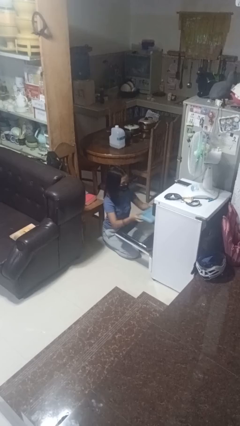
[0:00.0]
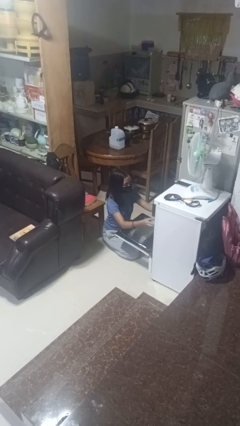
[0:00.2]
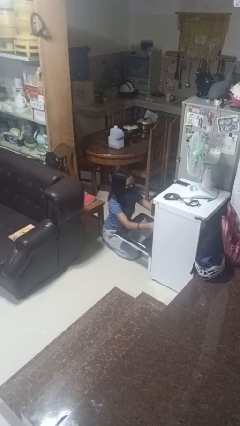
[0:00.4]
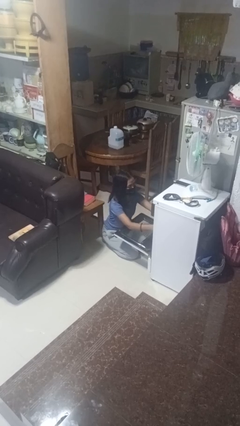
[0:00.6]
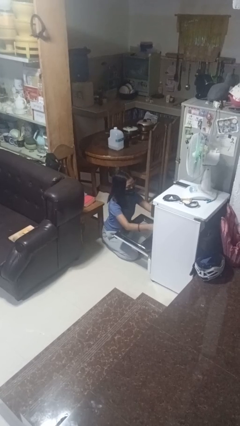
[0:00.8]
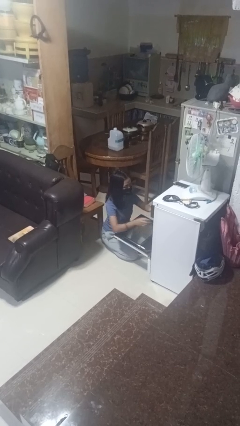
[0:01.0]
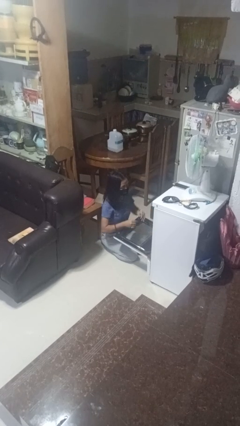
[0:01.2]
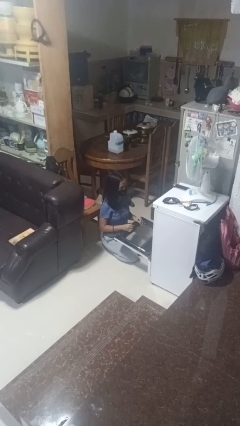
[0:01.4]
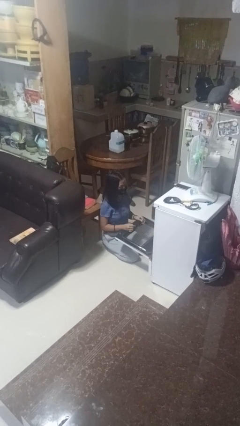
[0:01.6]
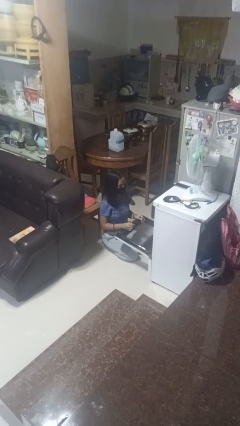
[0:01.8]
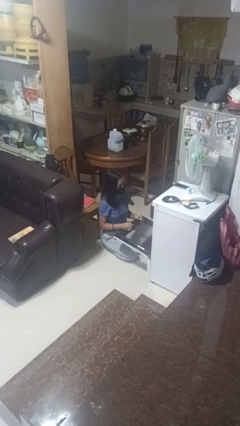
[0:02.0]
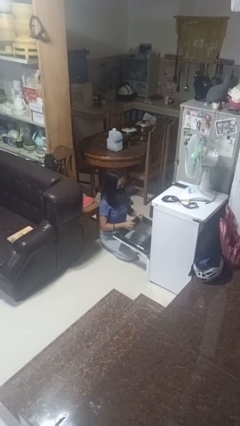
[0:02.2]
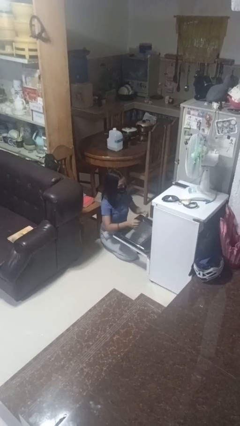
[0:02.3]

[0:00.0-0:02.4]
person puts object into oven

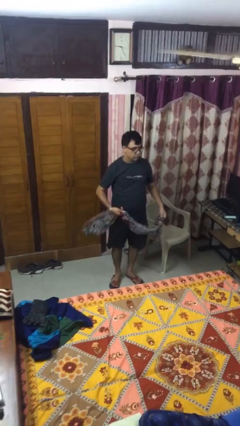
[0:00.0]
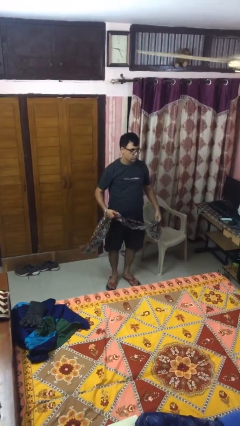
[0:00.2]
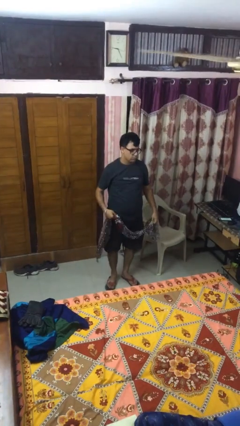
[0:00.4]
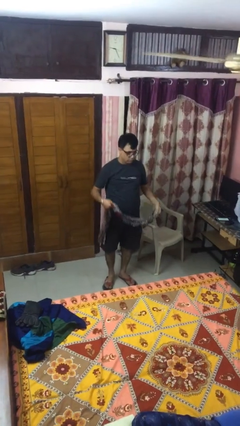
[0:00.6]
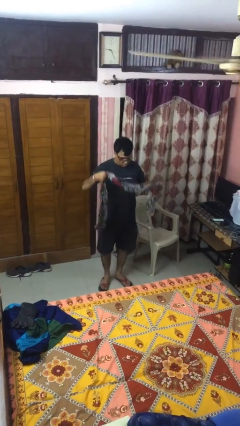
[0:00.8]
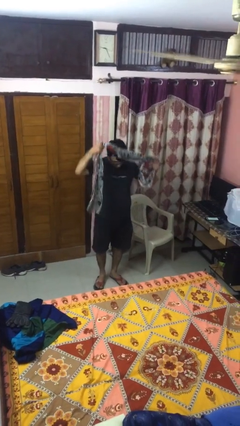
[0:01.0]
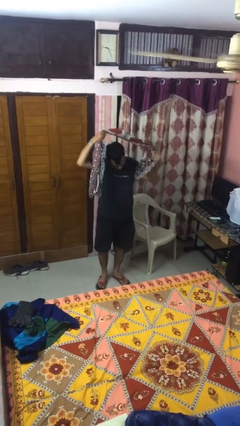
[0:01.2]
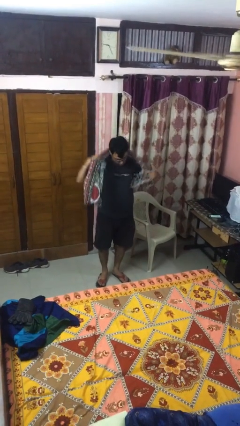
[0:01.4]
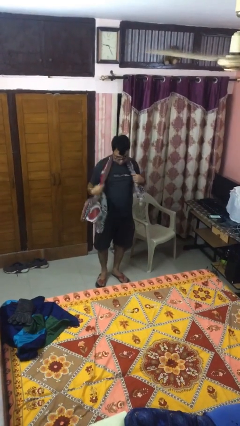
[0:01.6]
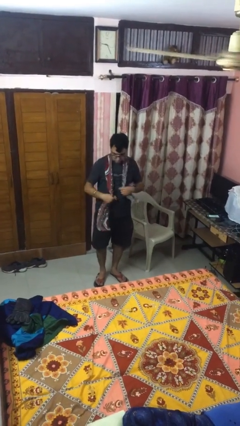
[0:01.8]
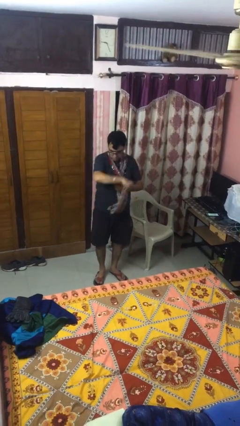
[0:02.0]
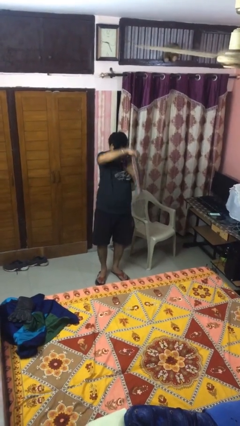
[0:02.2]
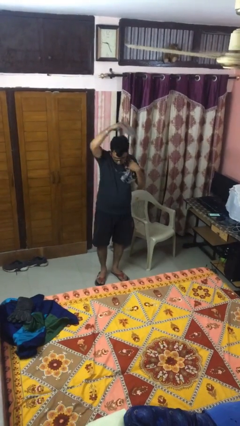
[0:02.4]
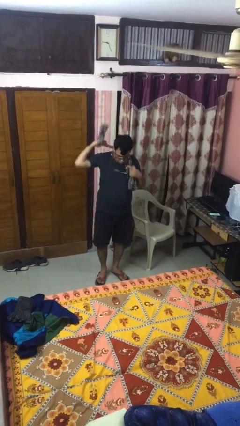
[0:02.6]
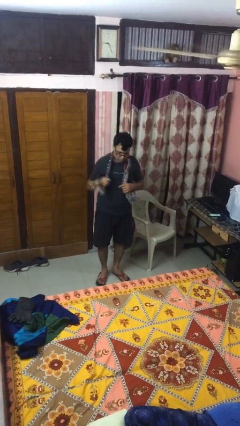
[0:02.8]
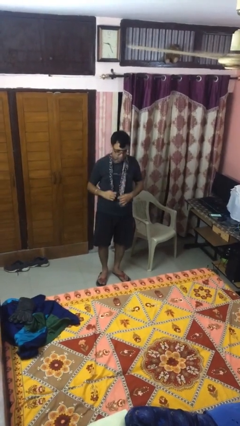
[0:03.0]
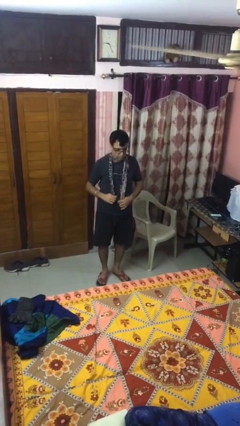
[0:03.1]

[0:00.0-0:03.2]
person puts on scarf

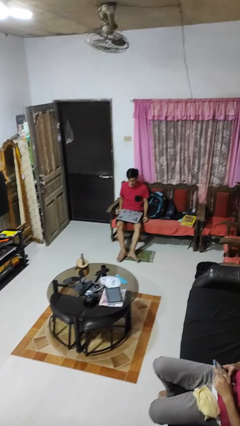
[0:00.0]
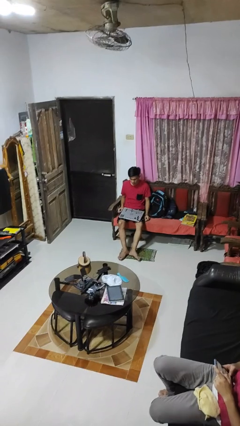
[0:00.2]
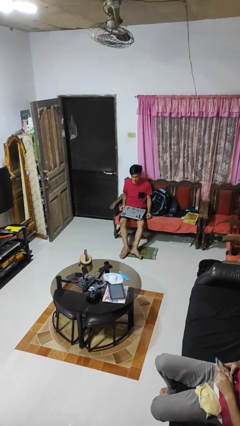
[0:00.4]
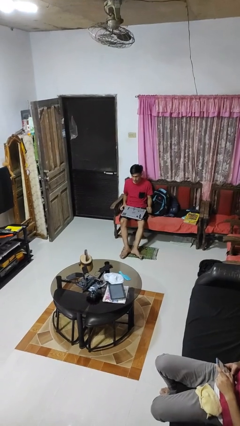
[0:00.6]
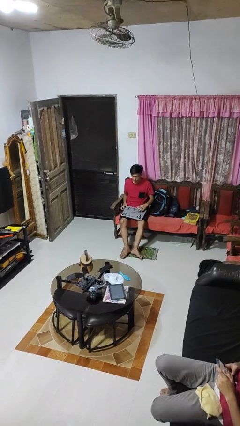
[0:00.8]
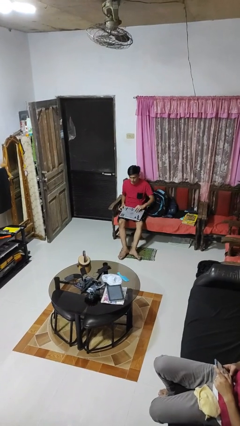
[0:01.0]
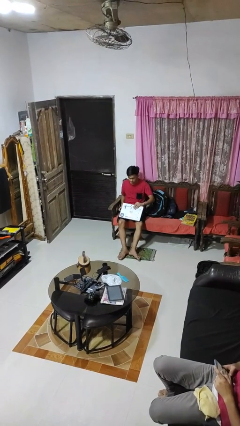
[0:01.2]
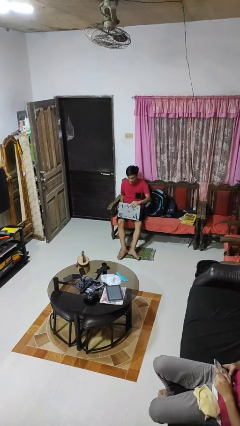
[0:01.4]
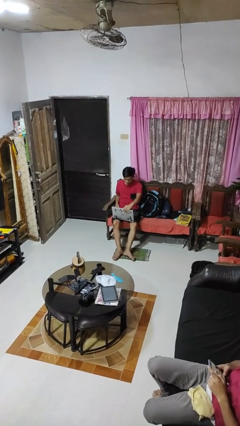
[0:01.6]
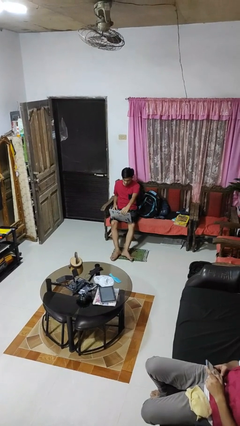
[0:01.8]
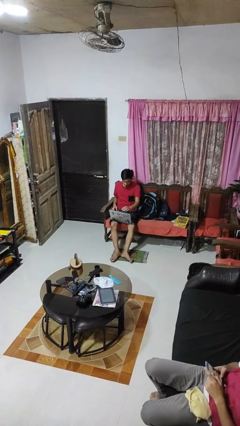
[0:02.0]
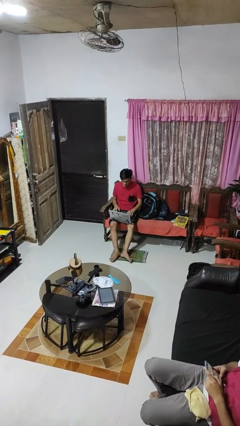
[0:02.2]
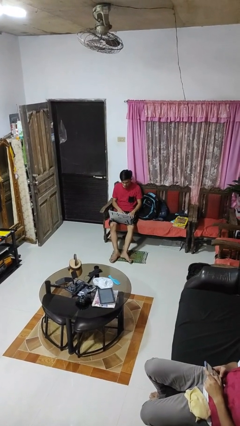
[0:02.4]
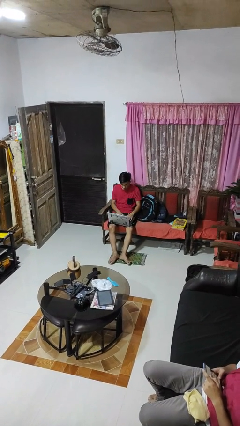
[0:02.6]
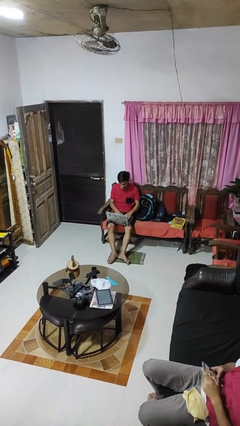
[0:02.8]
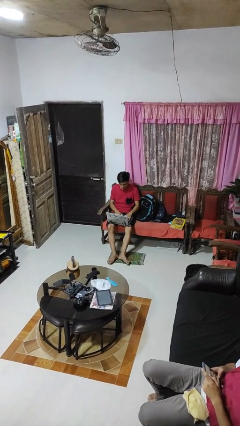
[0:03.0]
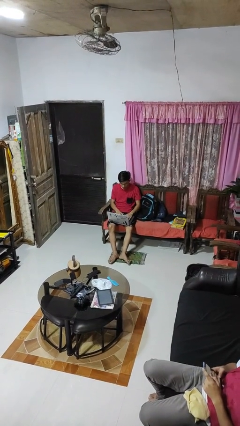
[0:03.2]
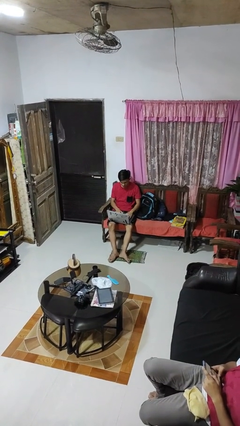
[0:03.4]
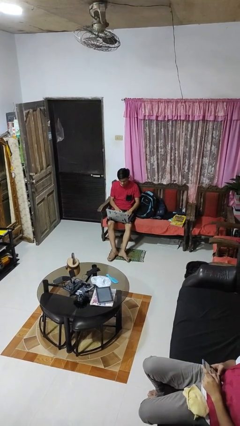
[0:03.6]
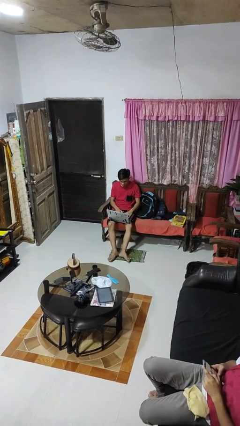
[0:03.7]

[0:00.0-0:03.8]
person opens laptop

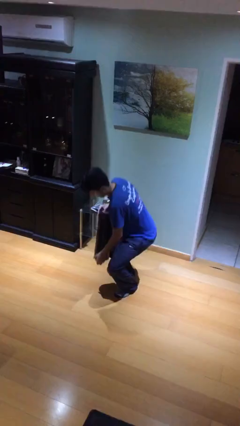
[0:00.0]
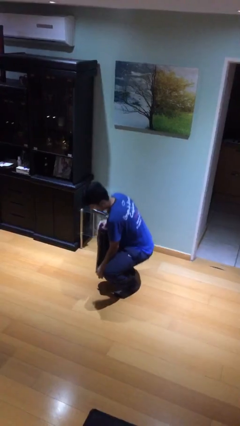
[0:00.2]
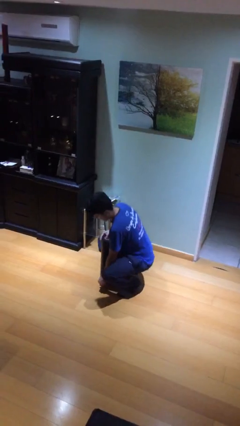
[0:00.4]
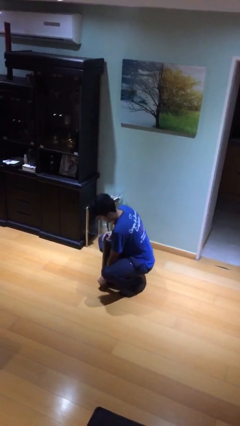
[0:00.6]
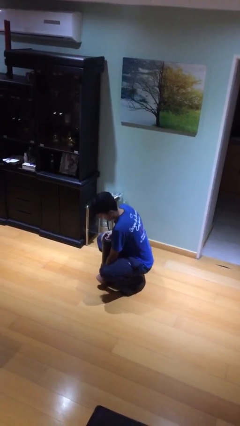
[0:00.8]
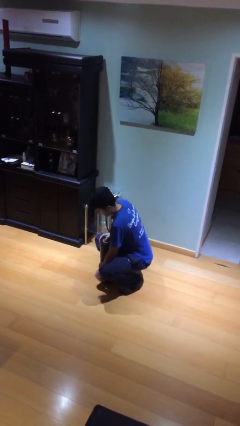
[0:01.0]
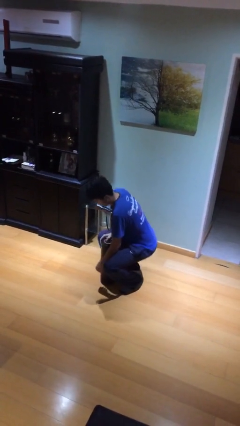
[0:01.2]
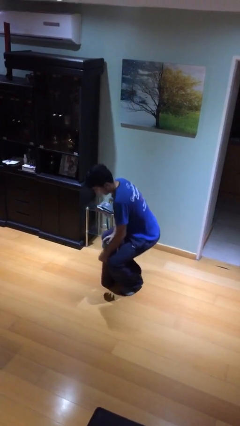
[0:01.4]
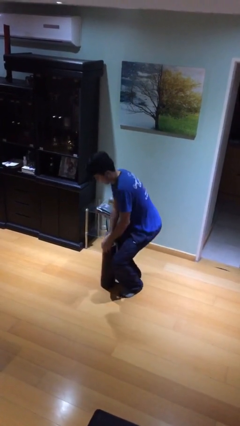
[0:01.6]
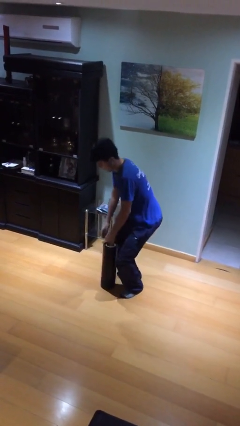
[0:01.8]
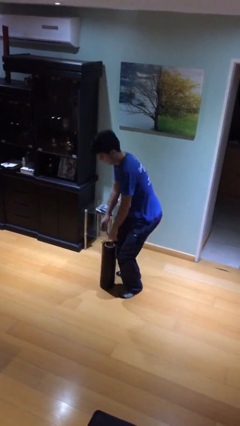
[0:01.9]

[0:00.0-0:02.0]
person puts down object on floor

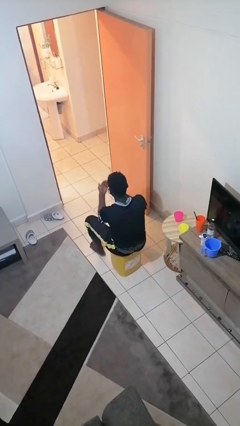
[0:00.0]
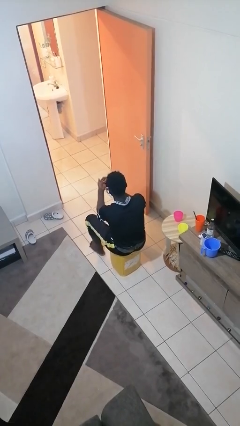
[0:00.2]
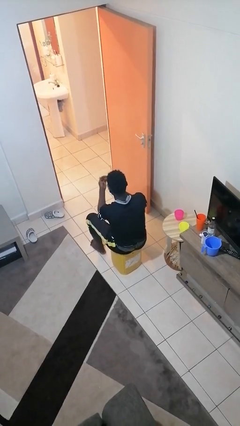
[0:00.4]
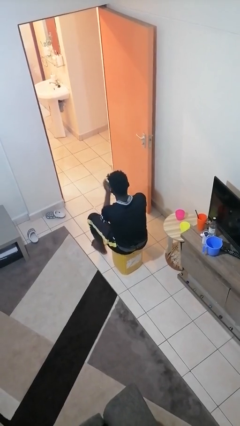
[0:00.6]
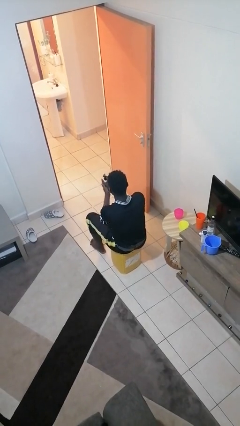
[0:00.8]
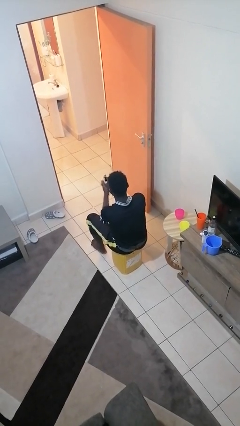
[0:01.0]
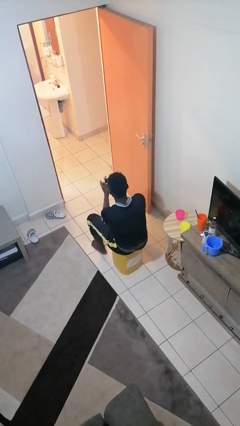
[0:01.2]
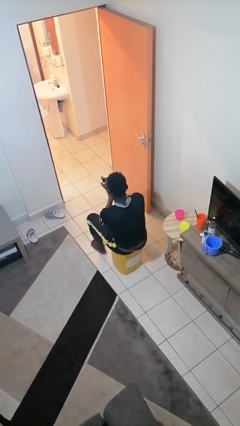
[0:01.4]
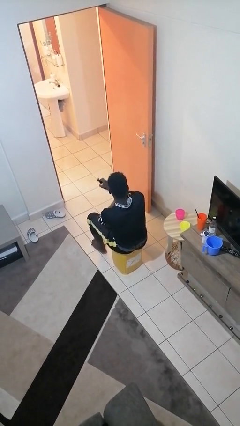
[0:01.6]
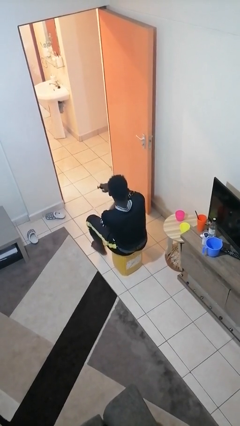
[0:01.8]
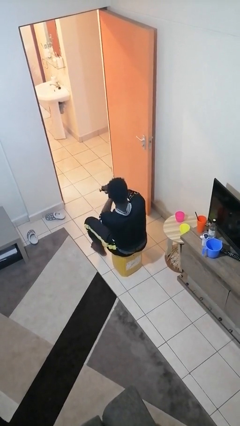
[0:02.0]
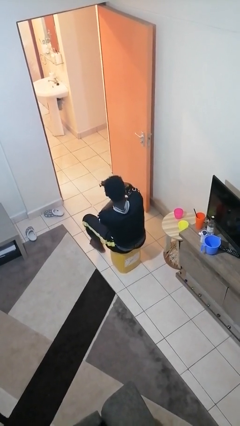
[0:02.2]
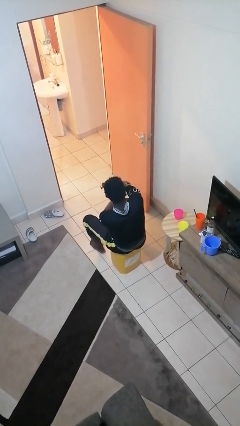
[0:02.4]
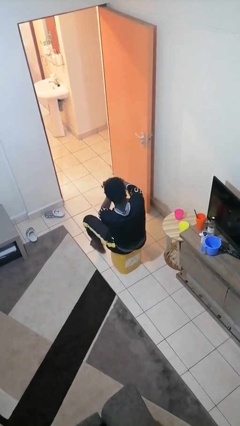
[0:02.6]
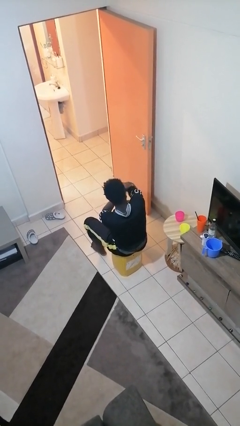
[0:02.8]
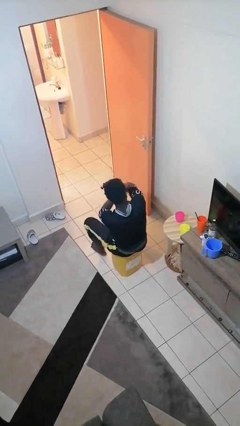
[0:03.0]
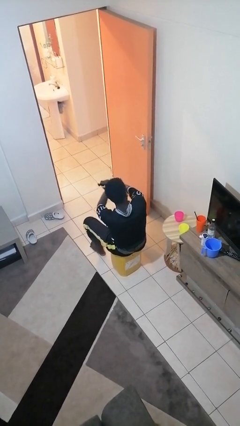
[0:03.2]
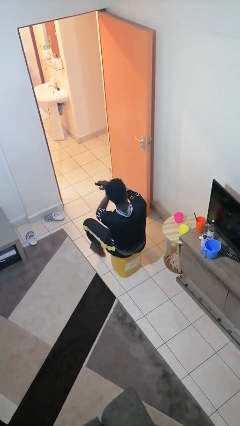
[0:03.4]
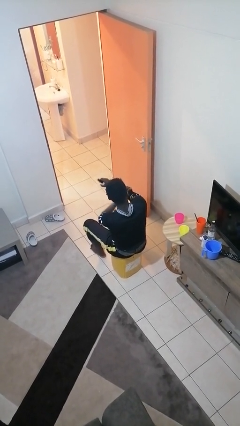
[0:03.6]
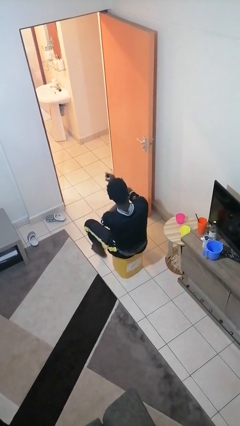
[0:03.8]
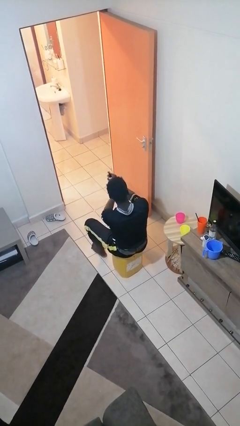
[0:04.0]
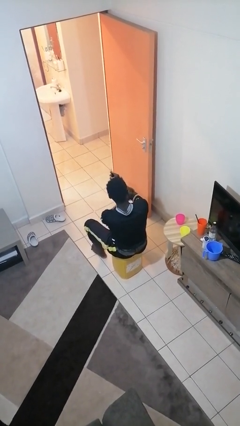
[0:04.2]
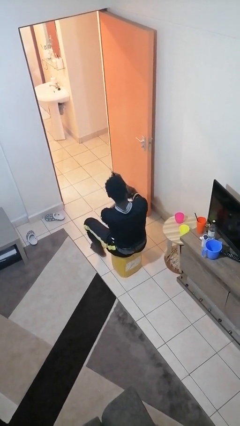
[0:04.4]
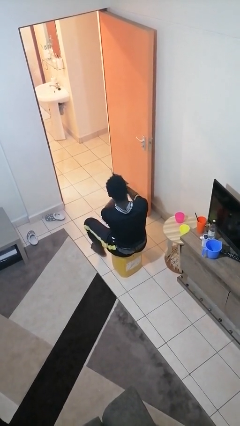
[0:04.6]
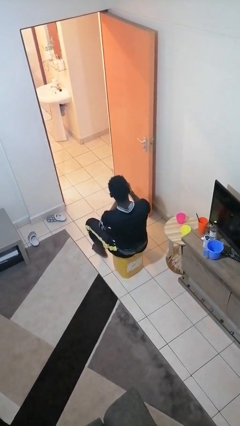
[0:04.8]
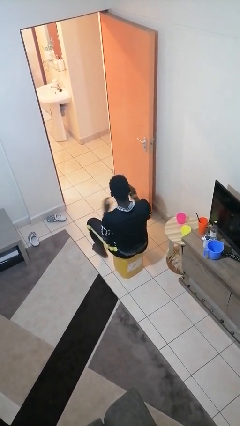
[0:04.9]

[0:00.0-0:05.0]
person applies sunscreen

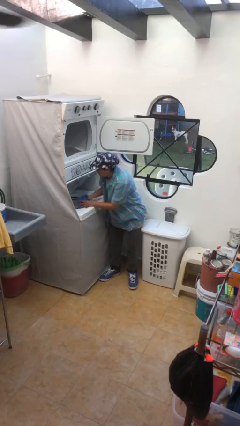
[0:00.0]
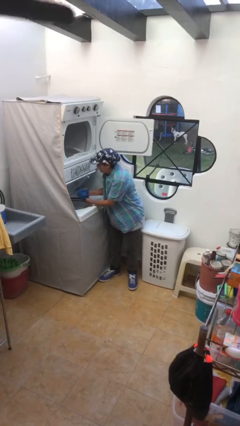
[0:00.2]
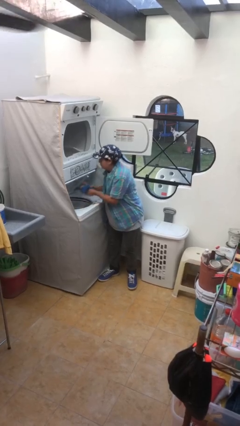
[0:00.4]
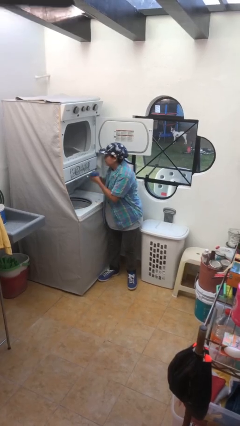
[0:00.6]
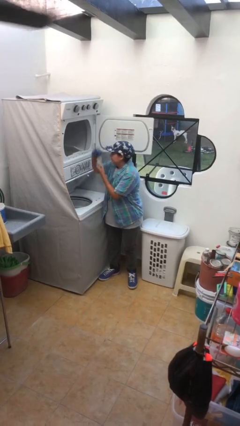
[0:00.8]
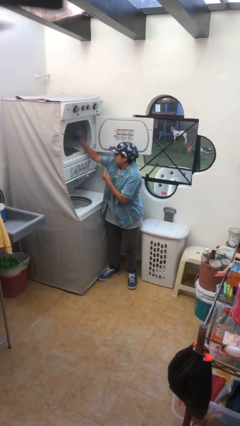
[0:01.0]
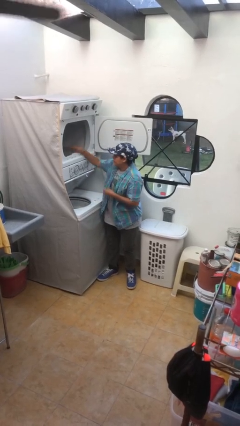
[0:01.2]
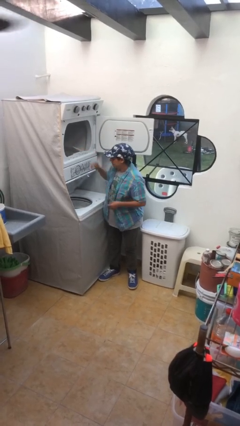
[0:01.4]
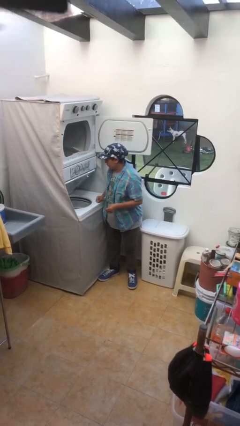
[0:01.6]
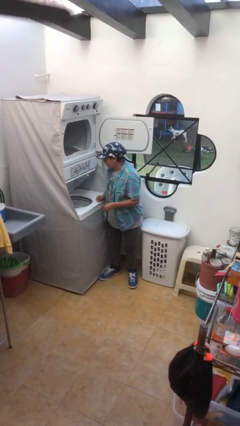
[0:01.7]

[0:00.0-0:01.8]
person loads dryer
